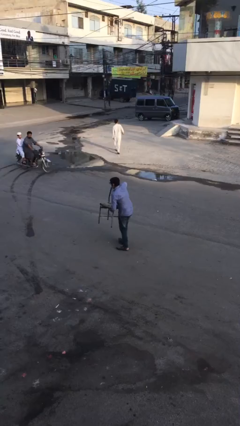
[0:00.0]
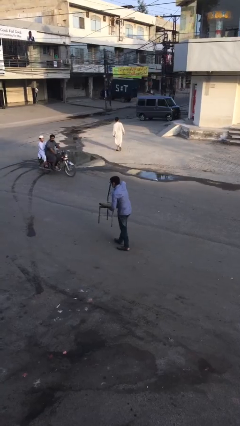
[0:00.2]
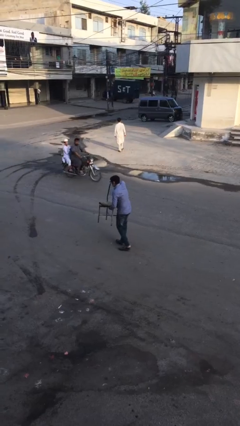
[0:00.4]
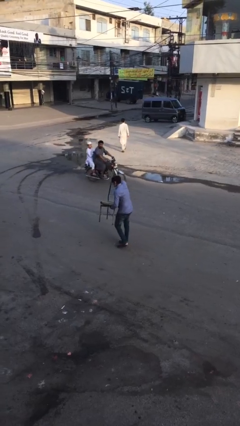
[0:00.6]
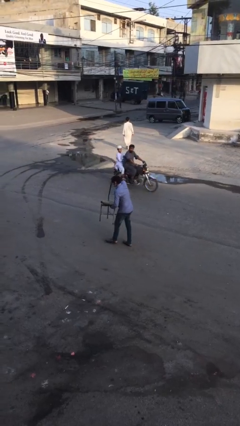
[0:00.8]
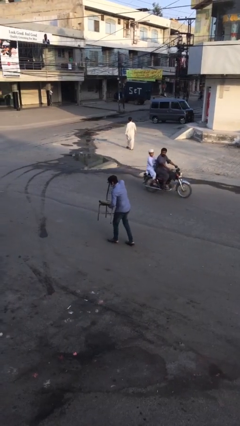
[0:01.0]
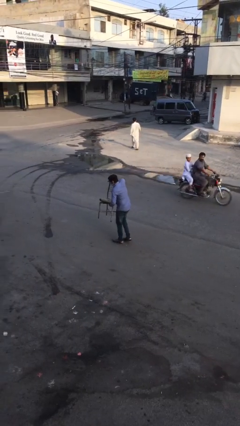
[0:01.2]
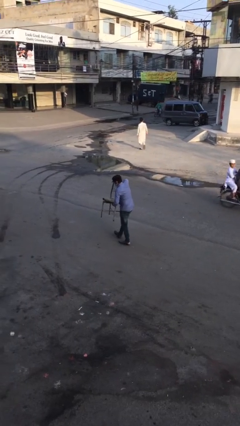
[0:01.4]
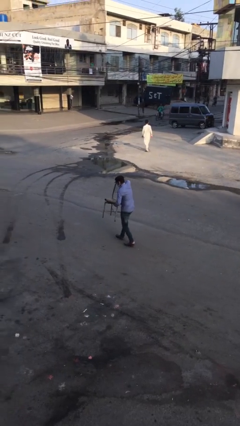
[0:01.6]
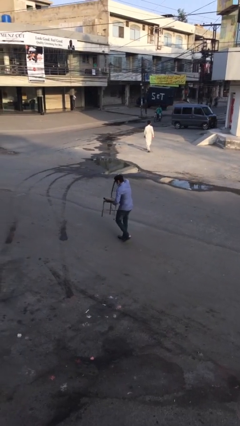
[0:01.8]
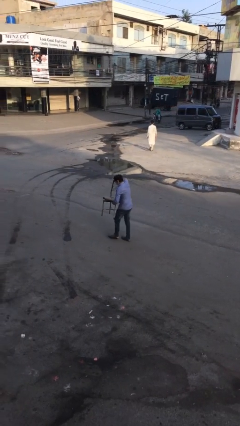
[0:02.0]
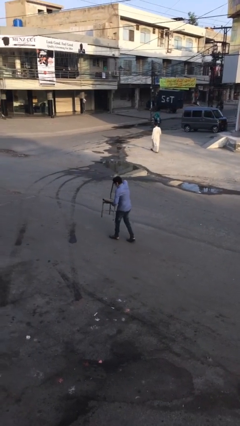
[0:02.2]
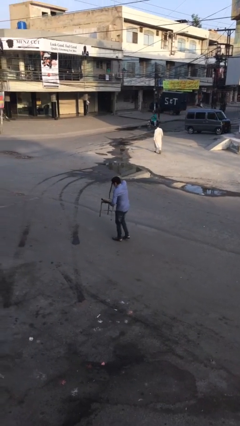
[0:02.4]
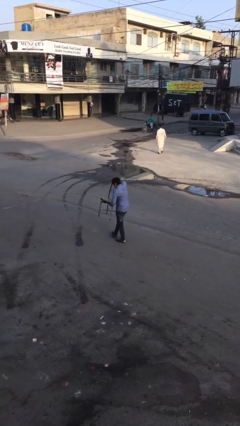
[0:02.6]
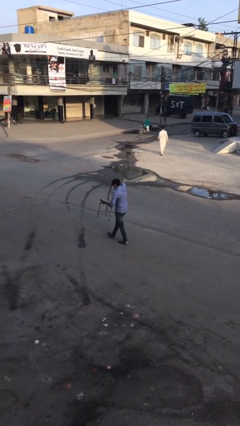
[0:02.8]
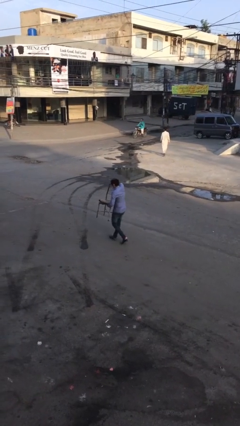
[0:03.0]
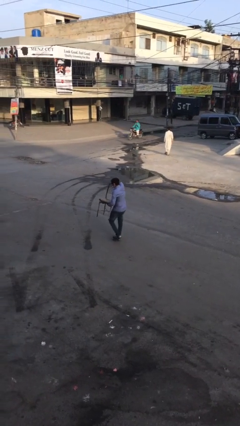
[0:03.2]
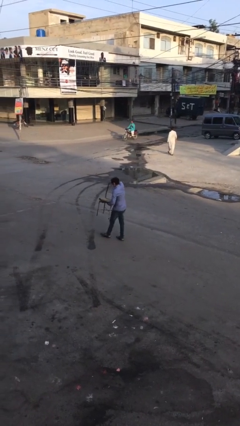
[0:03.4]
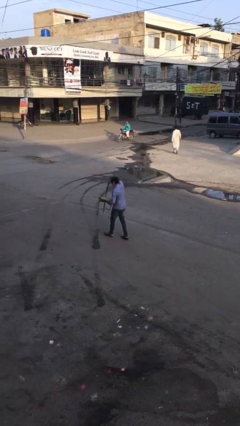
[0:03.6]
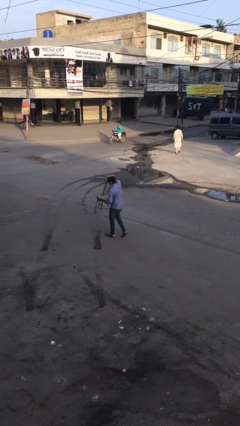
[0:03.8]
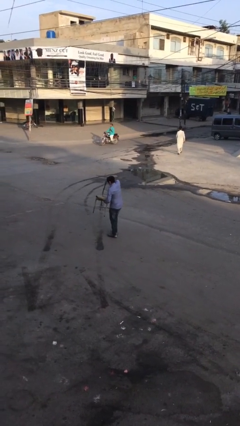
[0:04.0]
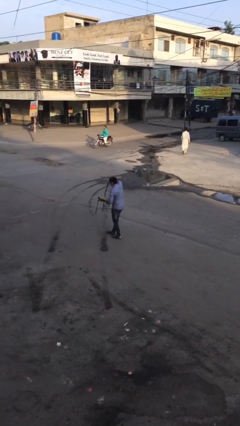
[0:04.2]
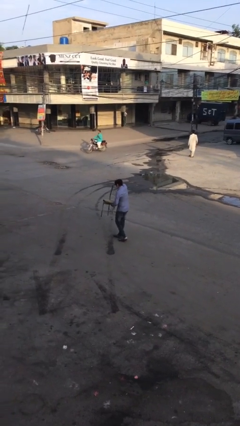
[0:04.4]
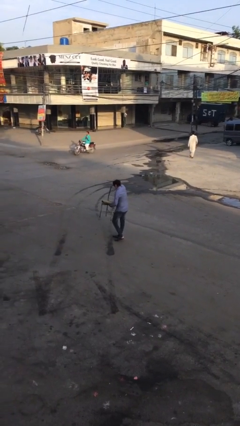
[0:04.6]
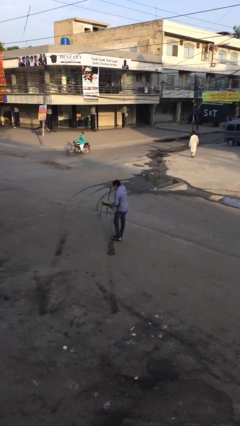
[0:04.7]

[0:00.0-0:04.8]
person carries heavy object

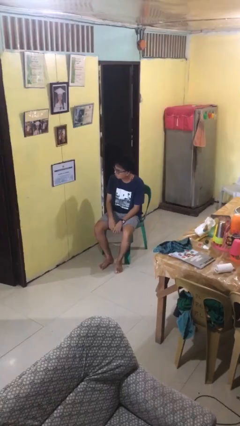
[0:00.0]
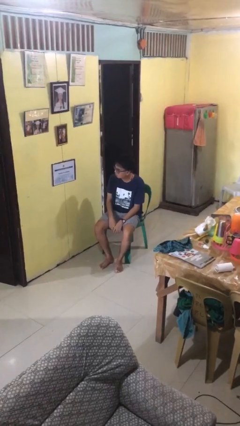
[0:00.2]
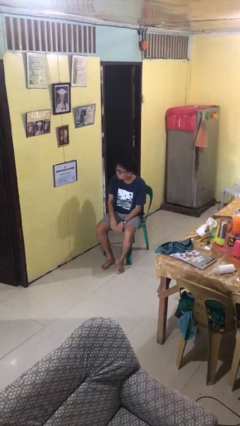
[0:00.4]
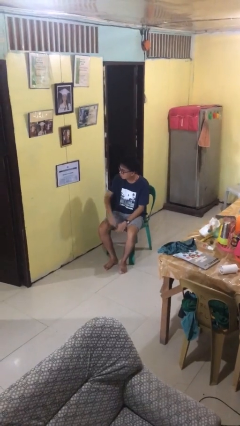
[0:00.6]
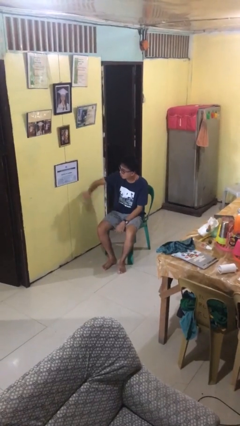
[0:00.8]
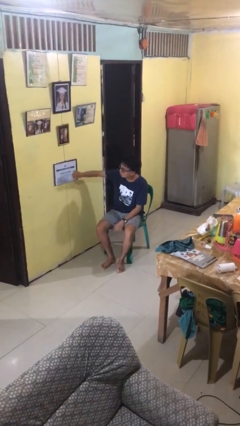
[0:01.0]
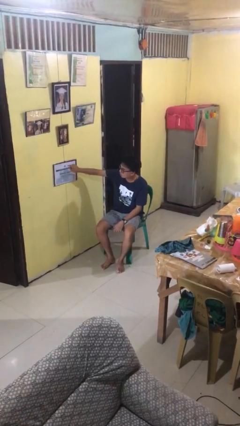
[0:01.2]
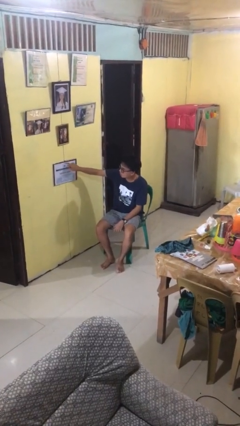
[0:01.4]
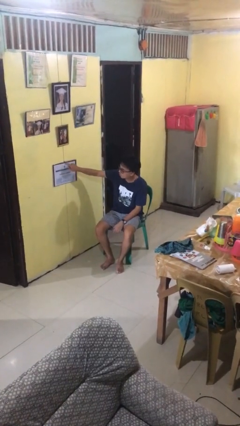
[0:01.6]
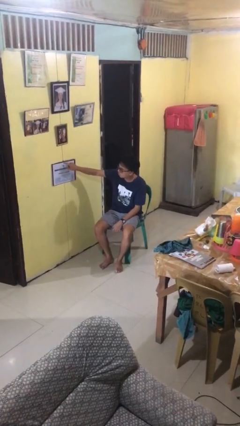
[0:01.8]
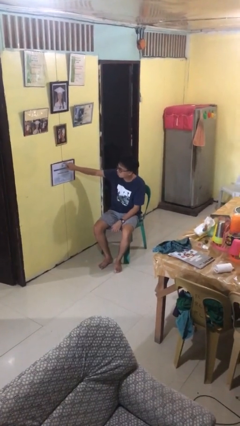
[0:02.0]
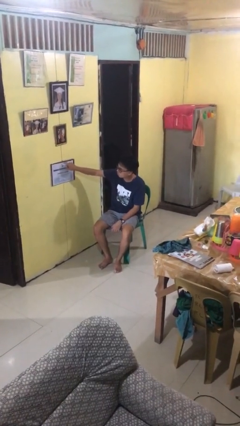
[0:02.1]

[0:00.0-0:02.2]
person taps object with finger

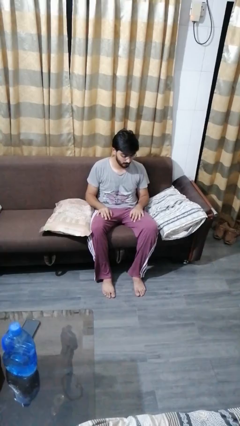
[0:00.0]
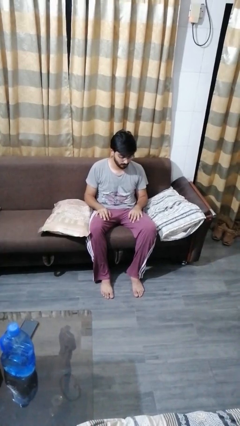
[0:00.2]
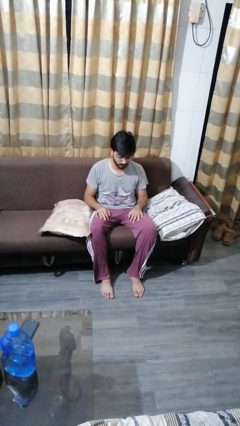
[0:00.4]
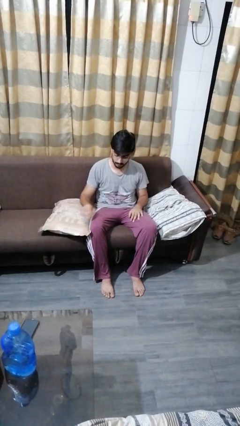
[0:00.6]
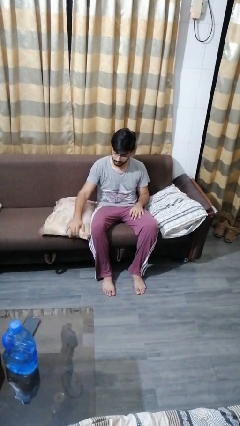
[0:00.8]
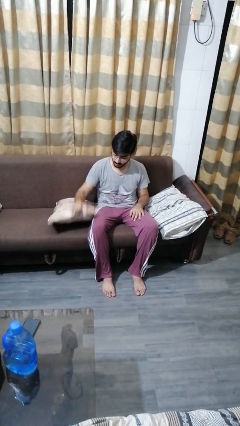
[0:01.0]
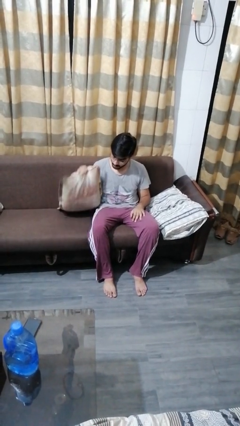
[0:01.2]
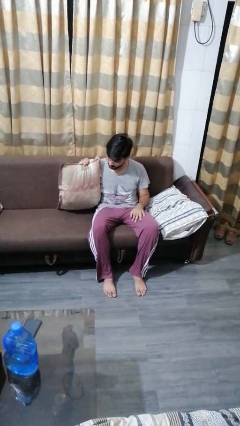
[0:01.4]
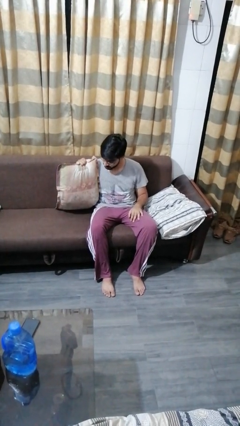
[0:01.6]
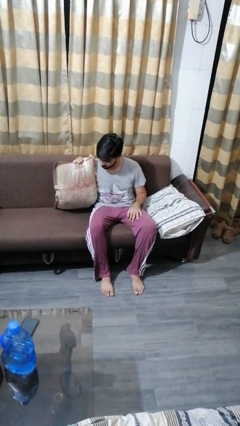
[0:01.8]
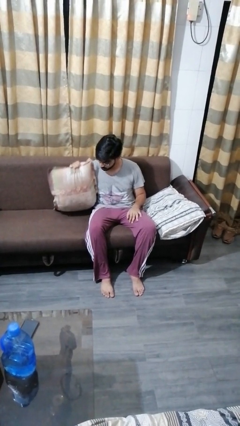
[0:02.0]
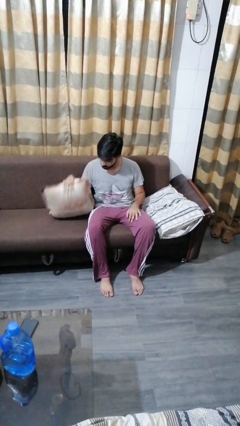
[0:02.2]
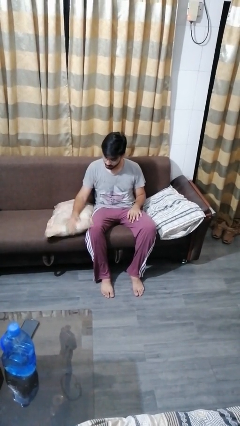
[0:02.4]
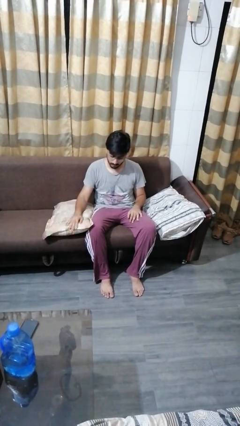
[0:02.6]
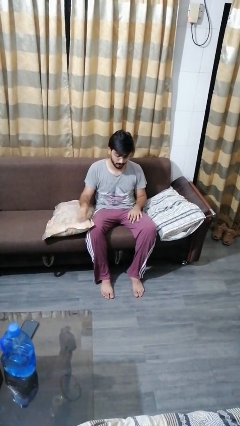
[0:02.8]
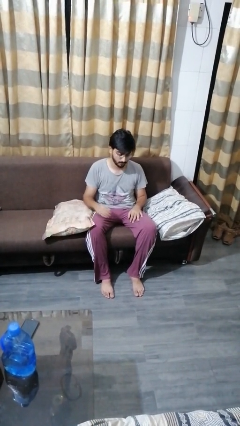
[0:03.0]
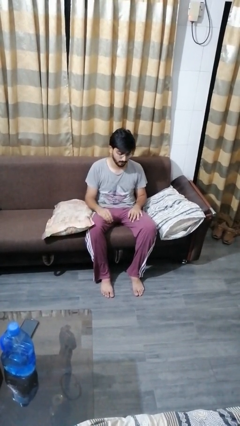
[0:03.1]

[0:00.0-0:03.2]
person searches in couch

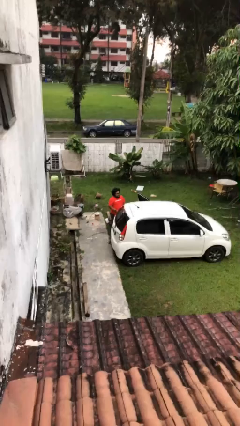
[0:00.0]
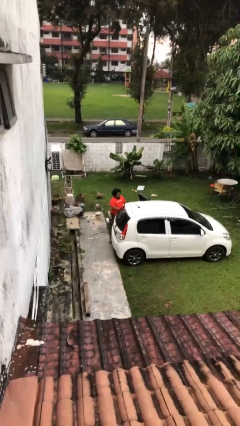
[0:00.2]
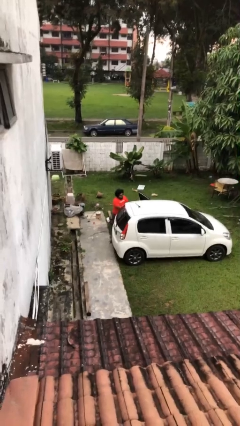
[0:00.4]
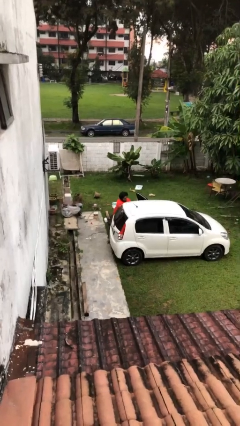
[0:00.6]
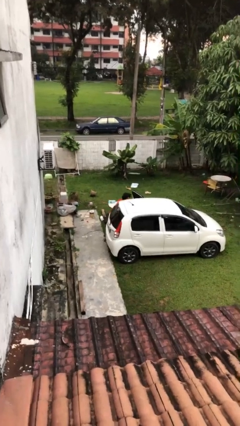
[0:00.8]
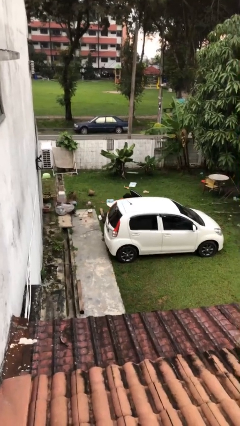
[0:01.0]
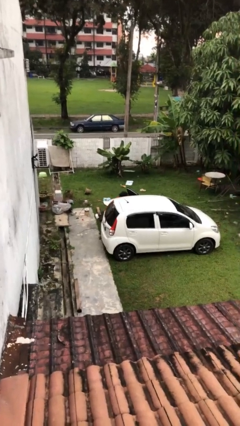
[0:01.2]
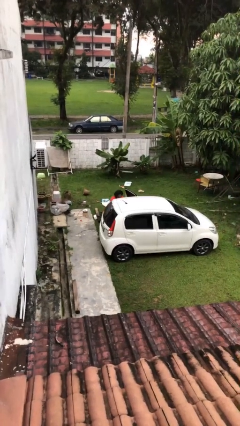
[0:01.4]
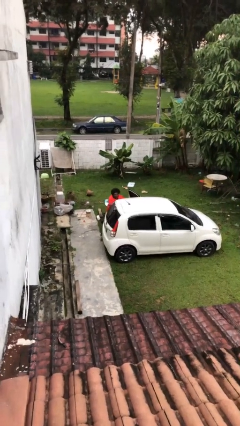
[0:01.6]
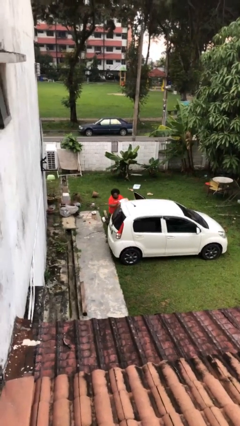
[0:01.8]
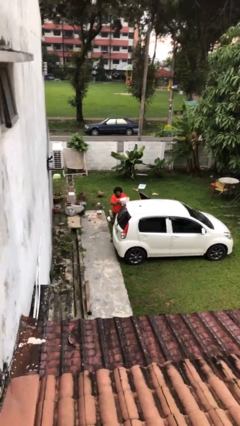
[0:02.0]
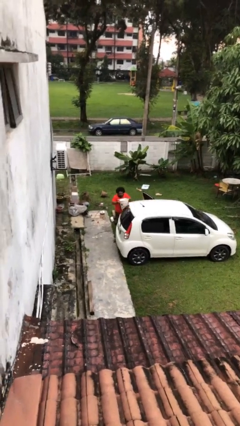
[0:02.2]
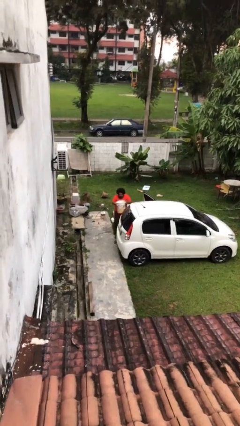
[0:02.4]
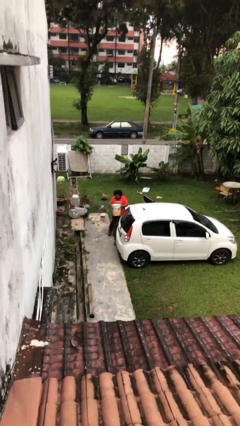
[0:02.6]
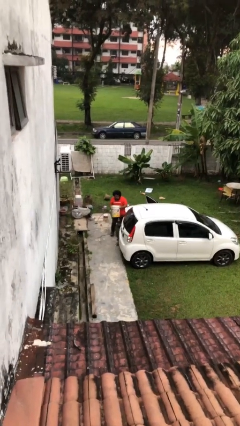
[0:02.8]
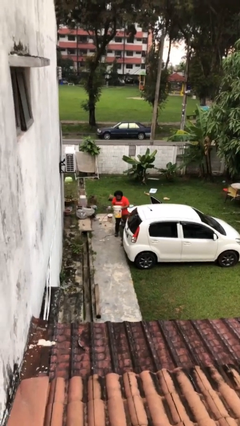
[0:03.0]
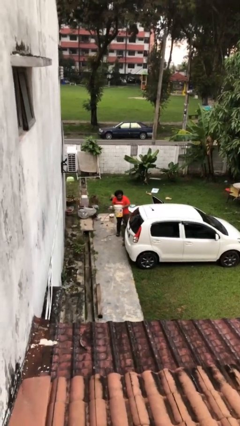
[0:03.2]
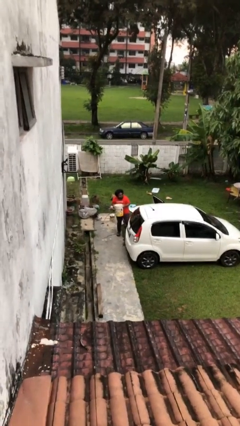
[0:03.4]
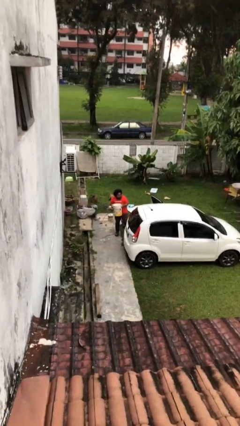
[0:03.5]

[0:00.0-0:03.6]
person unloads car

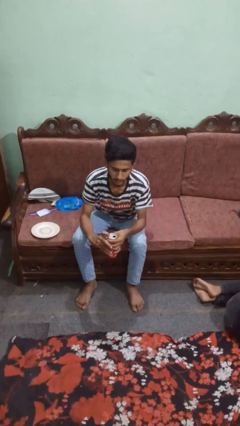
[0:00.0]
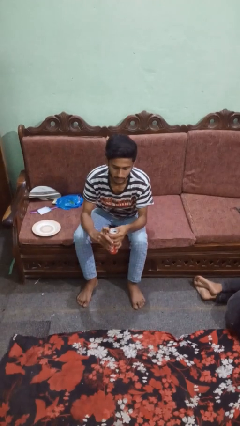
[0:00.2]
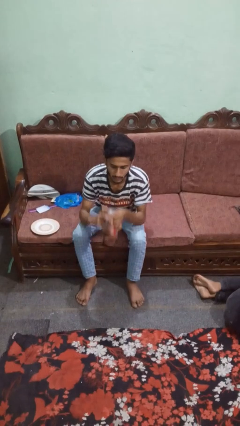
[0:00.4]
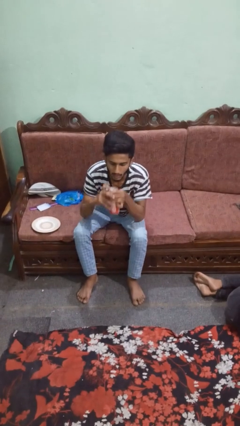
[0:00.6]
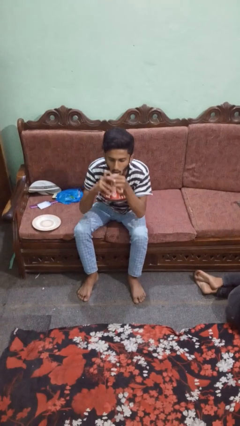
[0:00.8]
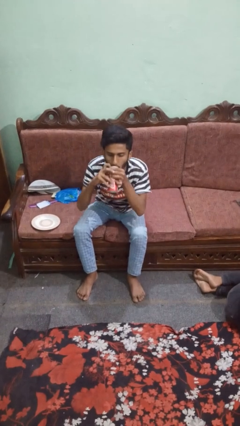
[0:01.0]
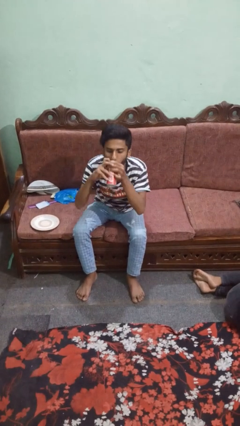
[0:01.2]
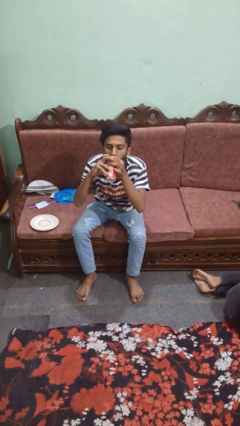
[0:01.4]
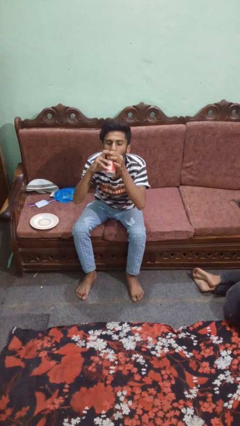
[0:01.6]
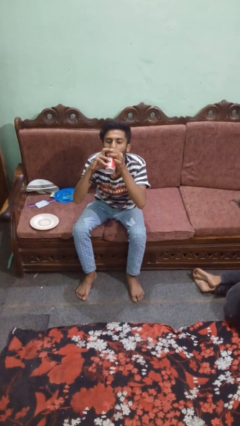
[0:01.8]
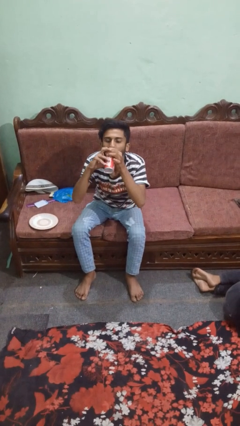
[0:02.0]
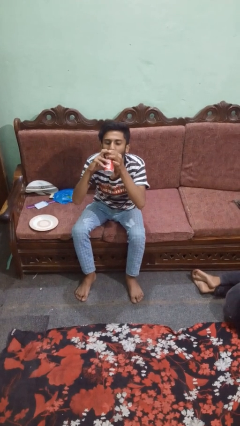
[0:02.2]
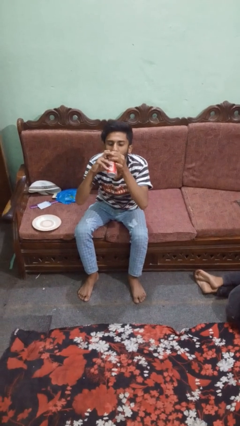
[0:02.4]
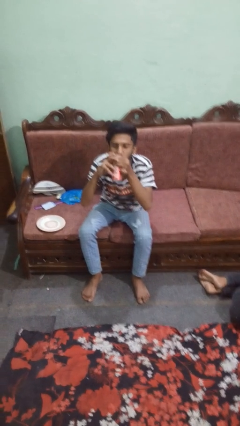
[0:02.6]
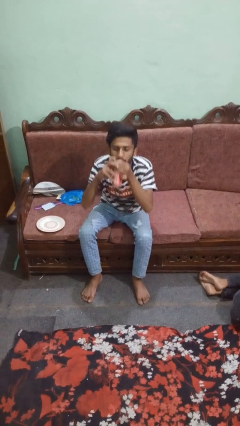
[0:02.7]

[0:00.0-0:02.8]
person drinks from beverage can

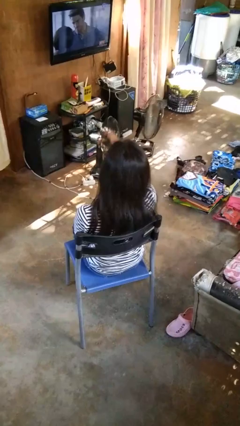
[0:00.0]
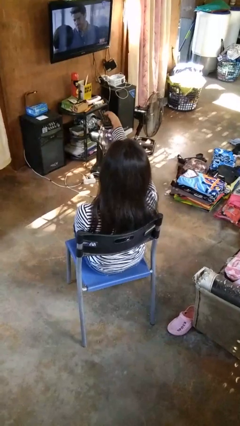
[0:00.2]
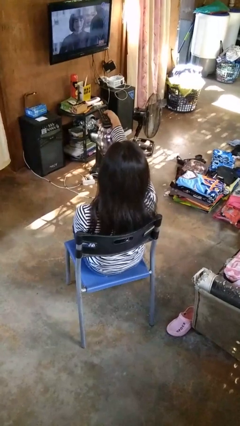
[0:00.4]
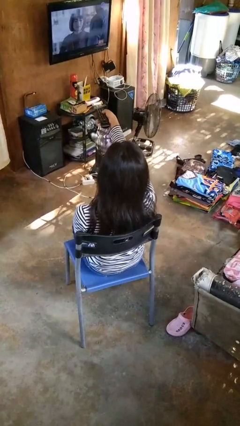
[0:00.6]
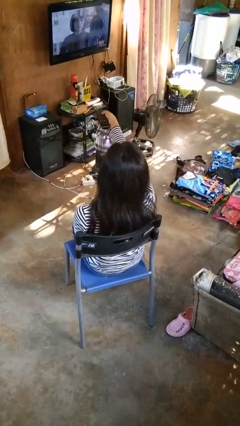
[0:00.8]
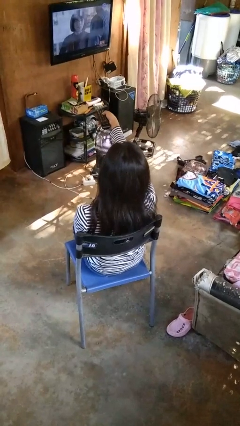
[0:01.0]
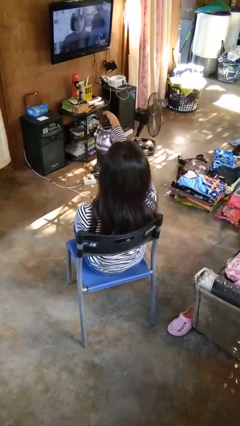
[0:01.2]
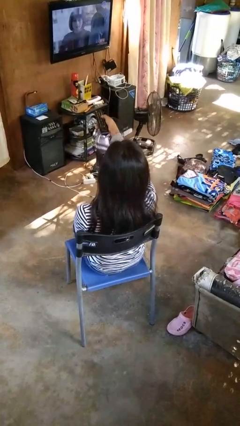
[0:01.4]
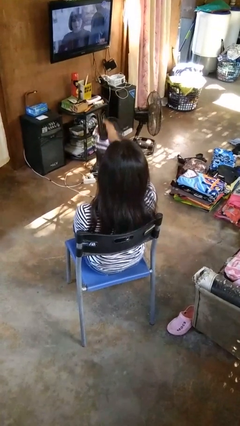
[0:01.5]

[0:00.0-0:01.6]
person uses television remote
